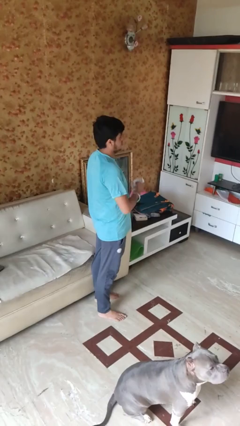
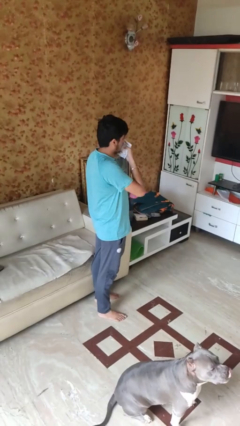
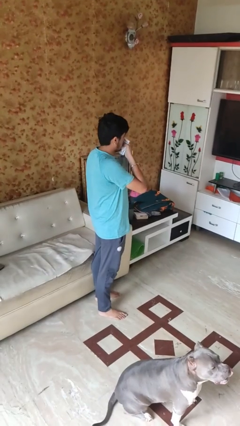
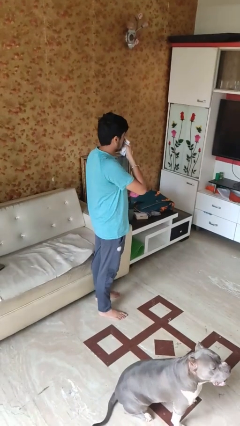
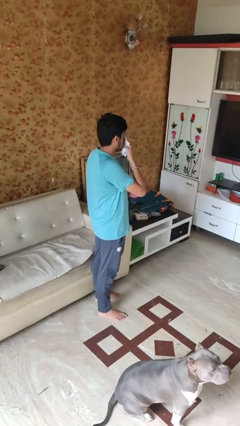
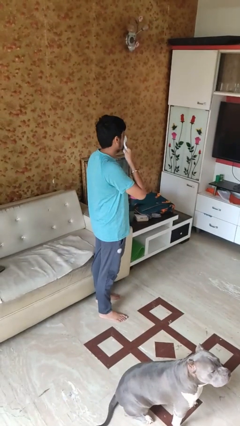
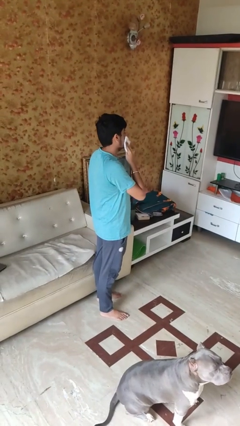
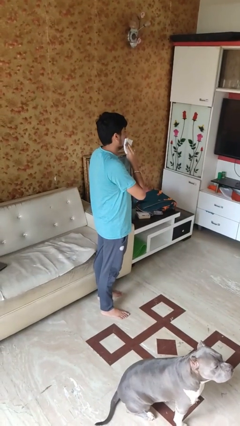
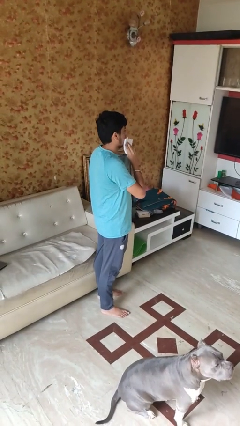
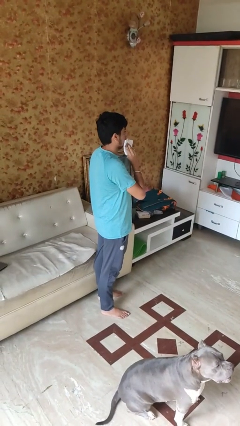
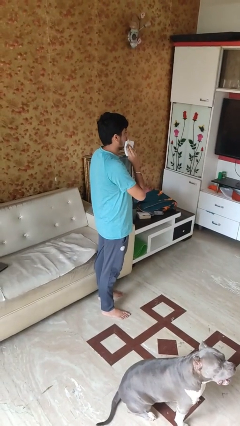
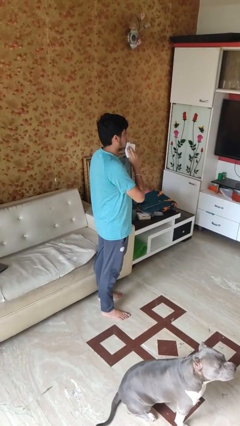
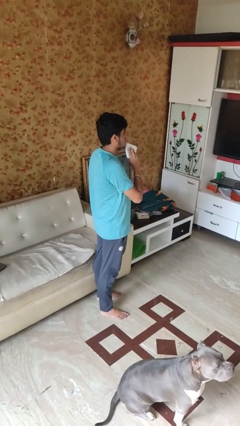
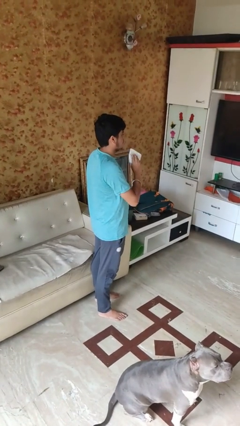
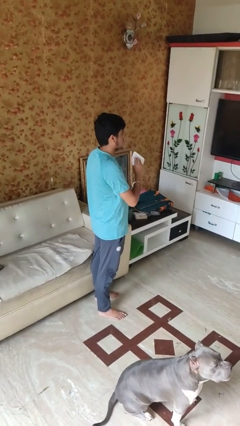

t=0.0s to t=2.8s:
person wipes mouth with napkin

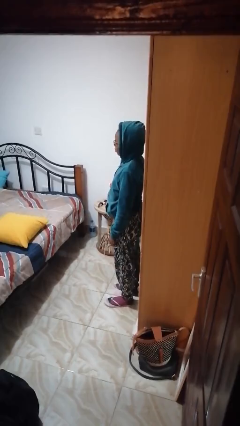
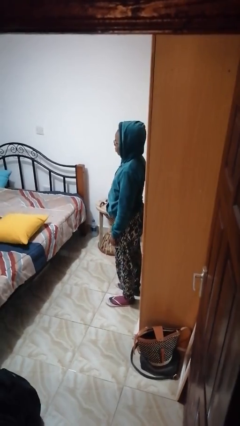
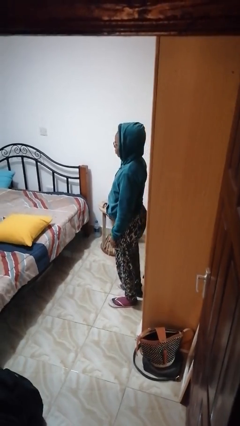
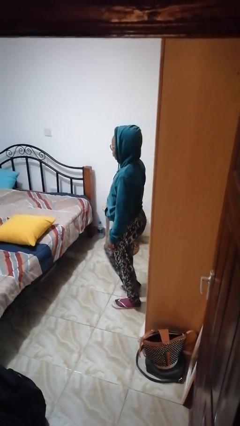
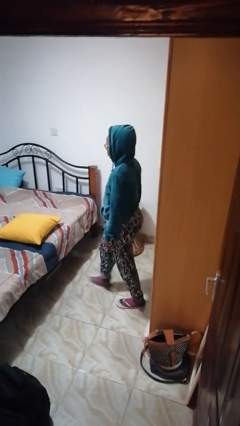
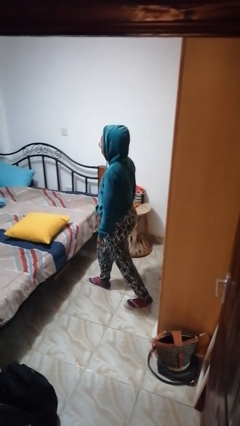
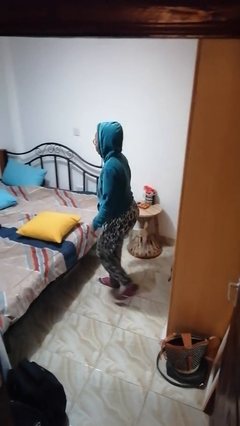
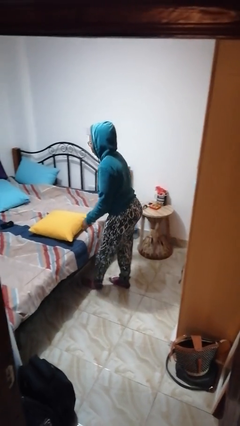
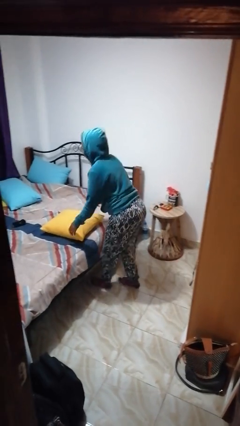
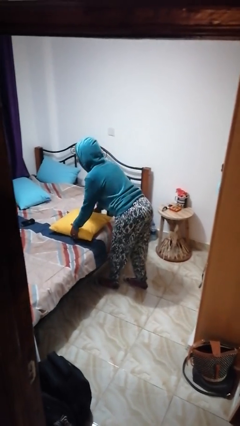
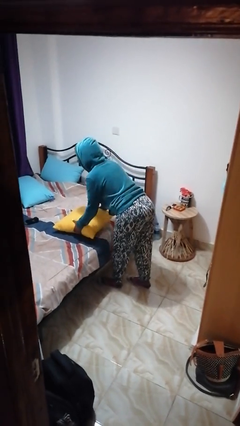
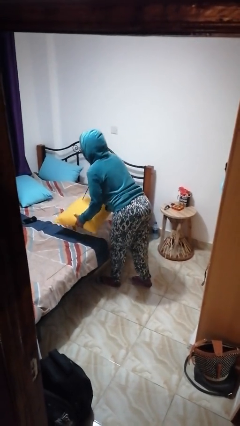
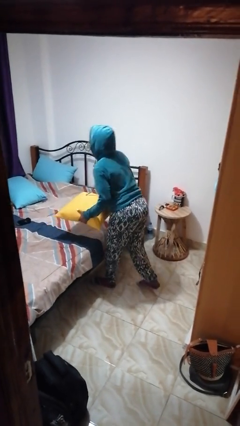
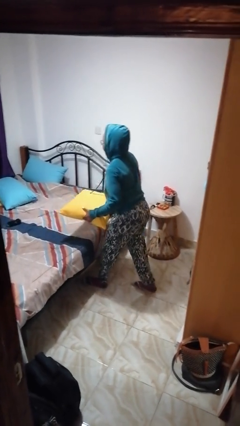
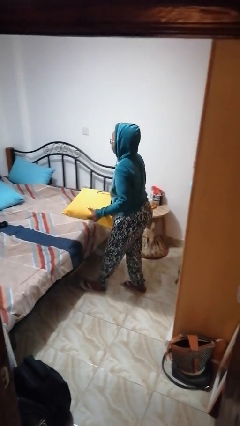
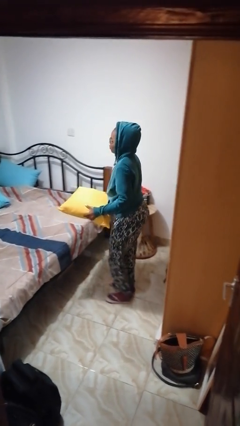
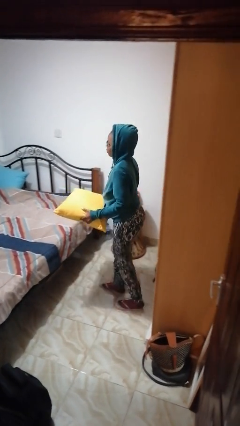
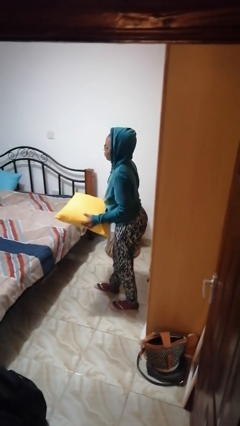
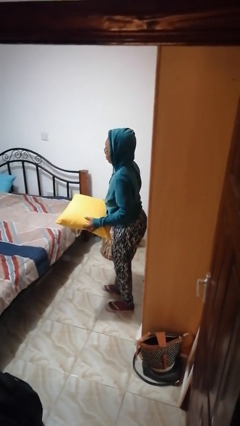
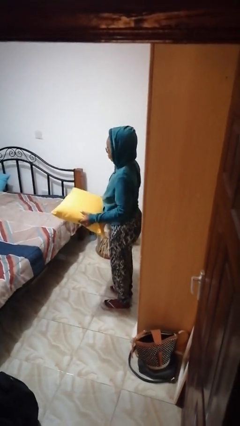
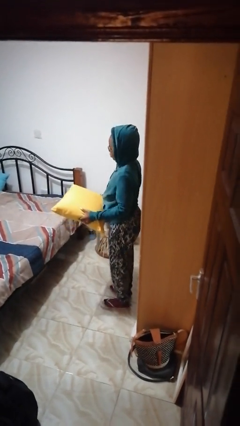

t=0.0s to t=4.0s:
person picks up object from bed

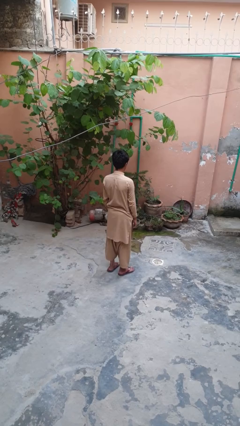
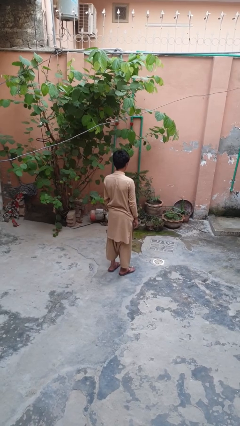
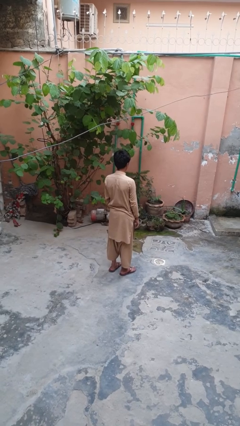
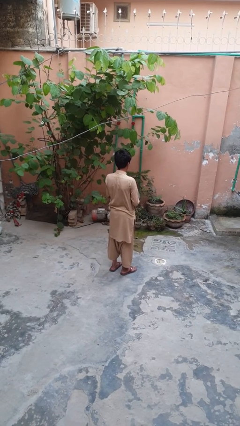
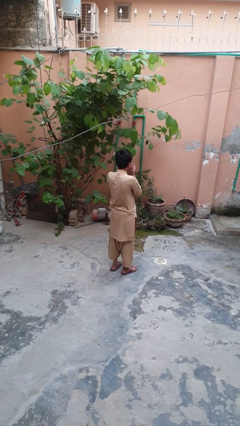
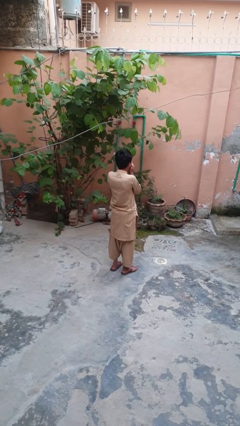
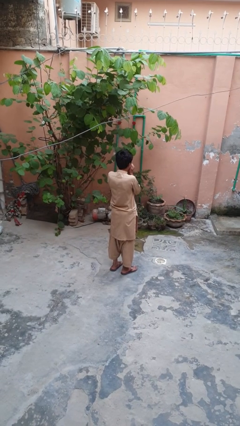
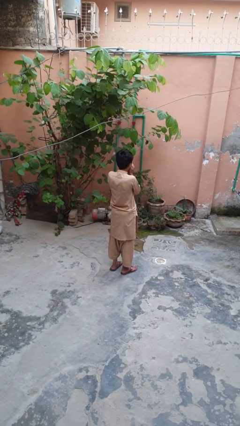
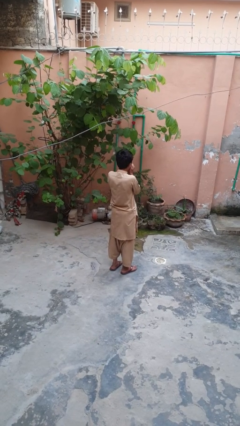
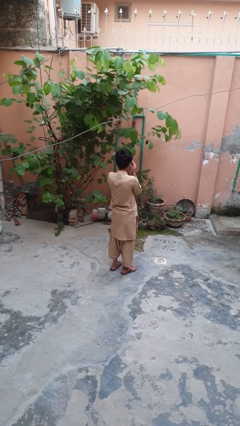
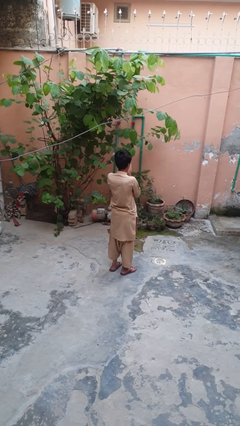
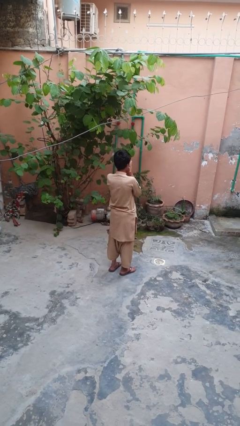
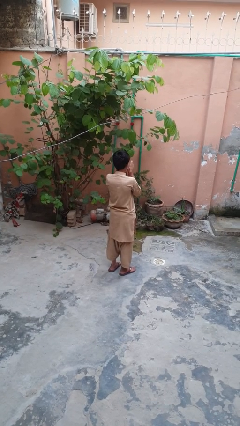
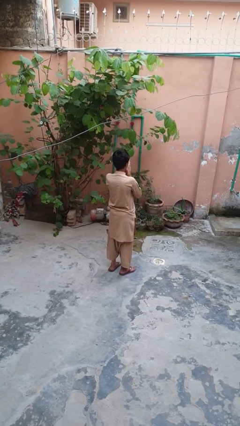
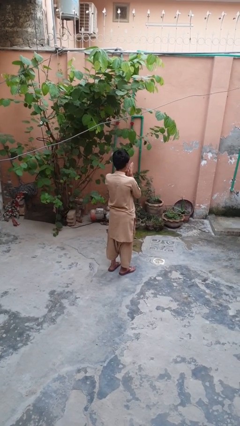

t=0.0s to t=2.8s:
person blows into hands

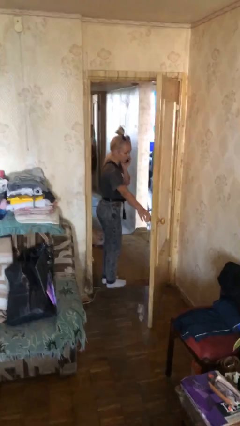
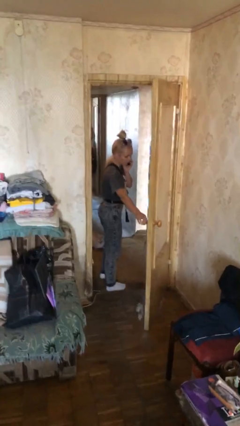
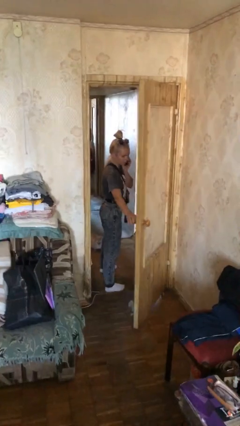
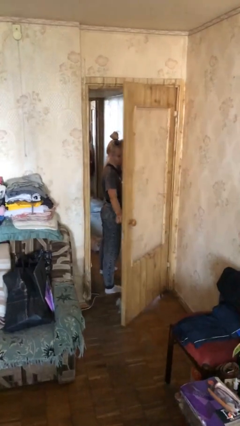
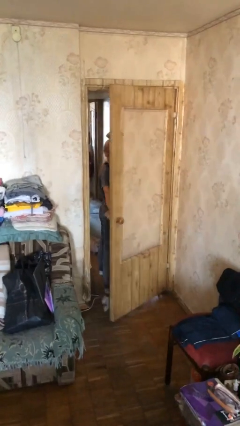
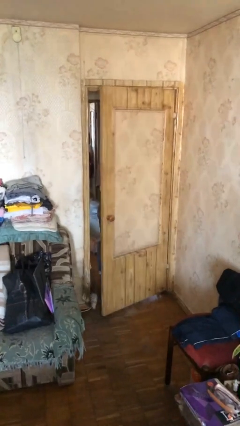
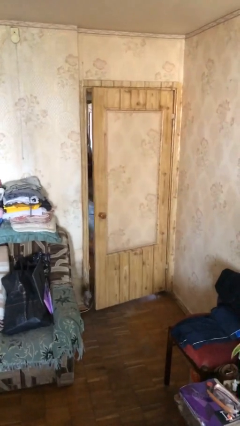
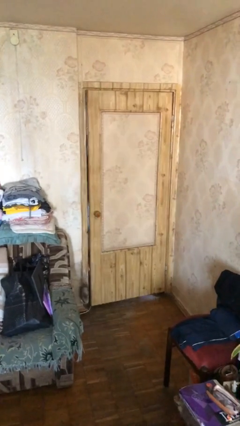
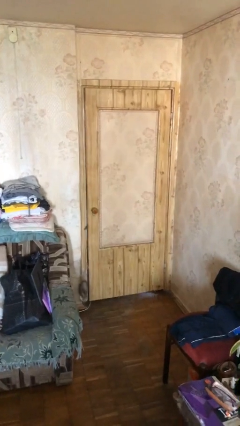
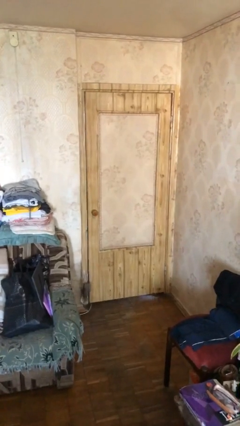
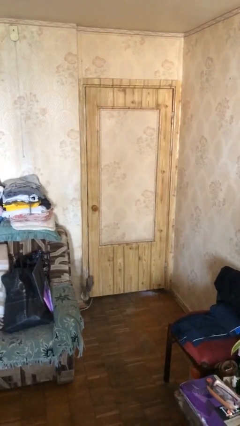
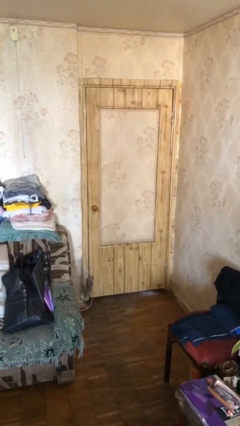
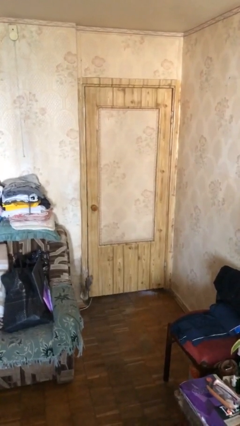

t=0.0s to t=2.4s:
person closes facility door

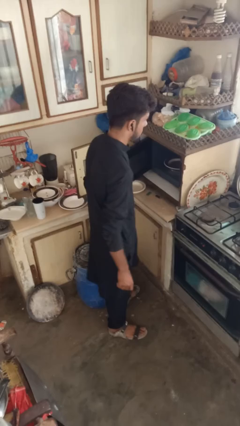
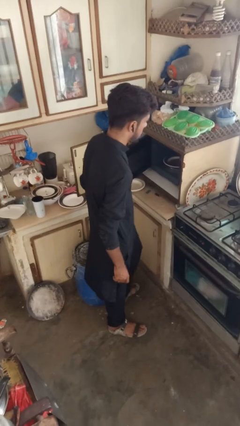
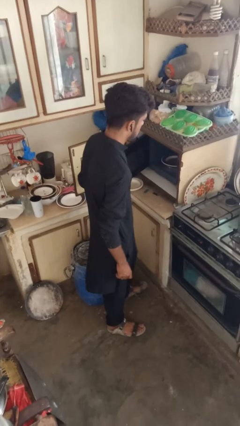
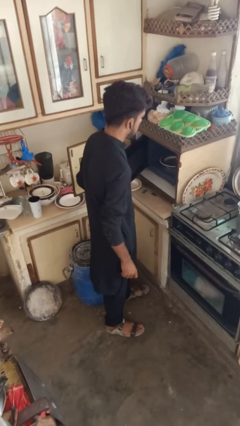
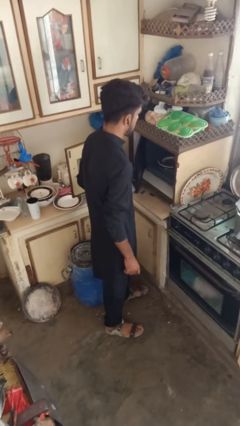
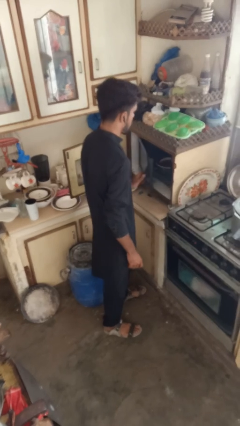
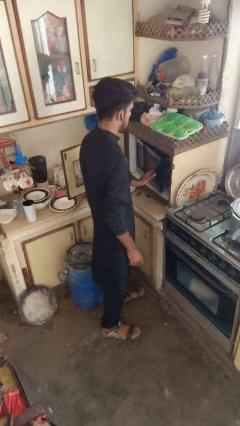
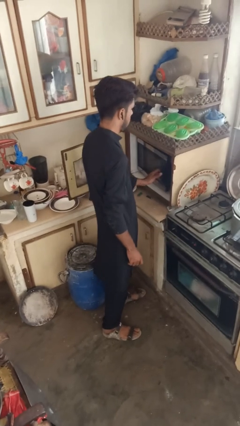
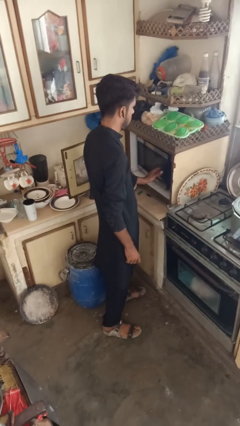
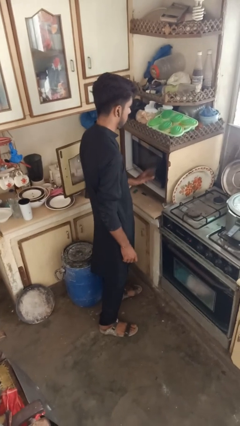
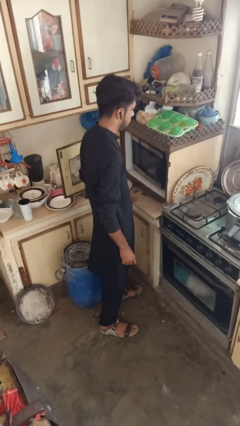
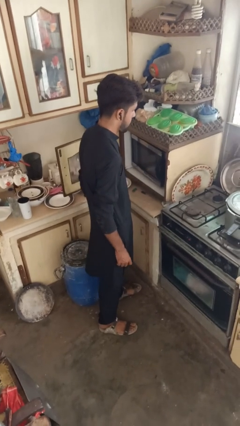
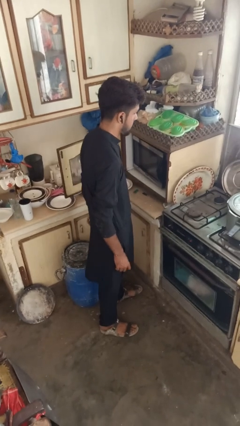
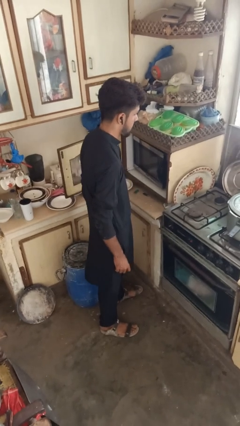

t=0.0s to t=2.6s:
person closes microwave

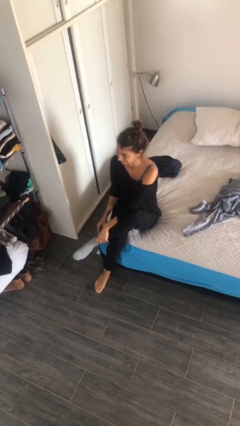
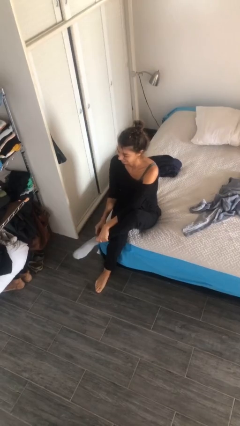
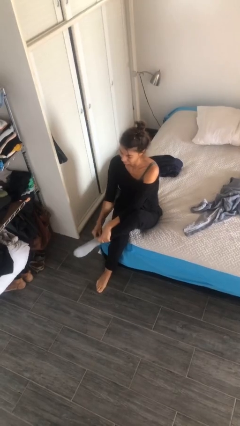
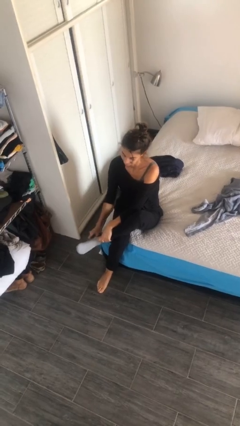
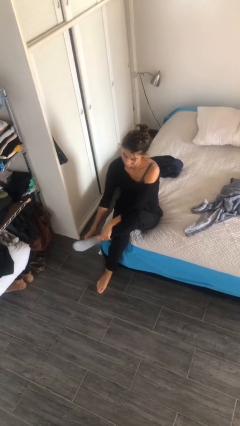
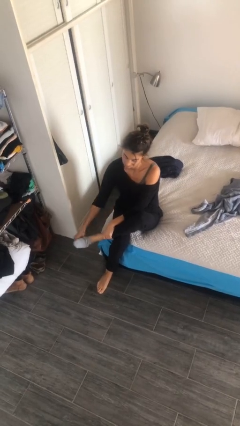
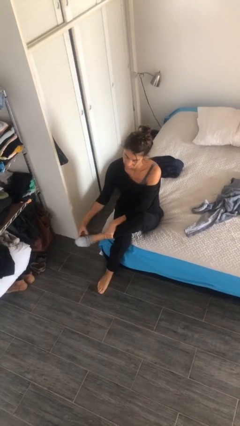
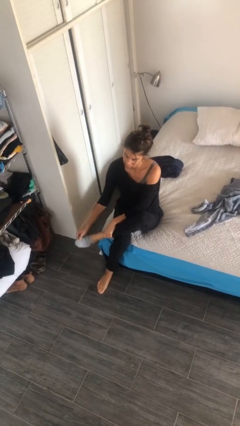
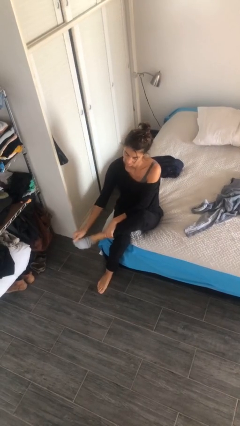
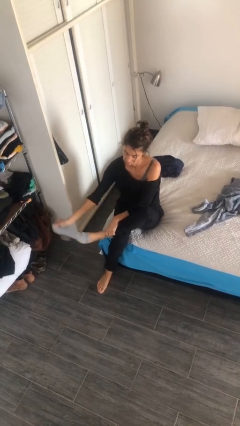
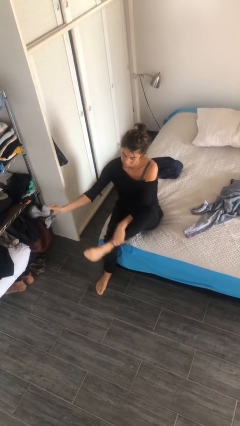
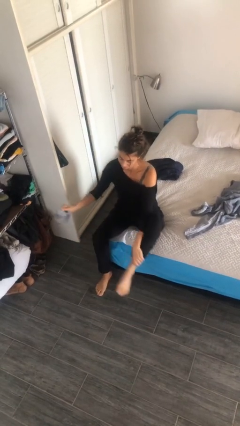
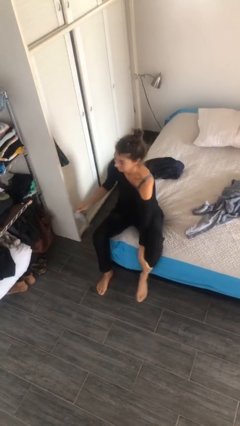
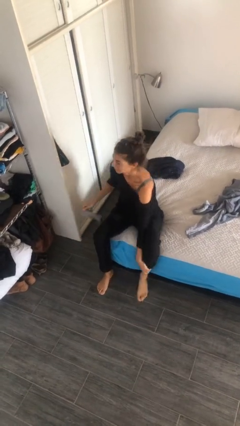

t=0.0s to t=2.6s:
person takes off socks
